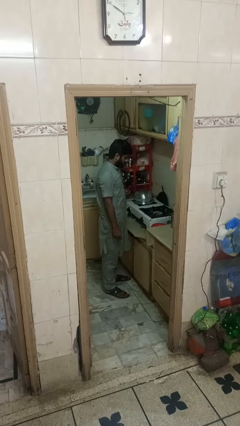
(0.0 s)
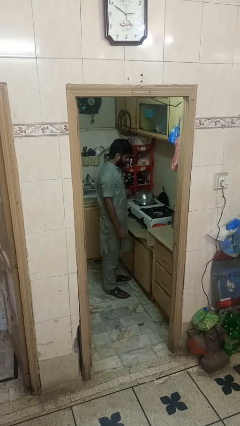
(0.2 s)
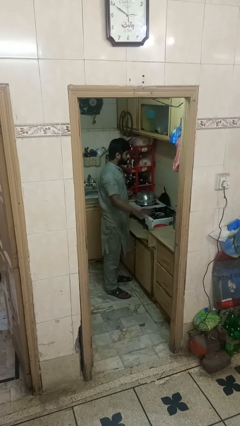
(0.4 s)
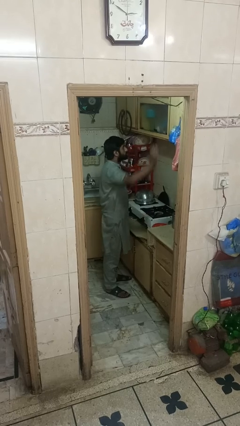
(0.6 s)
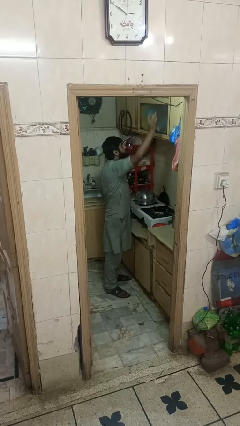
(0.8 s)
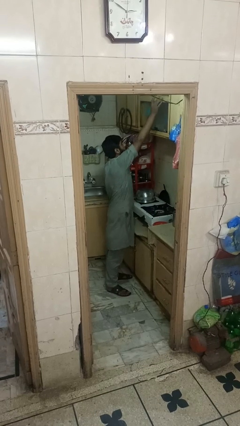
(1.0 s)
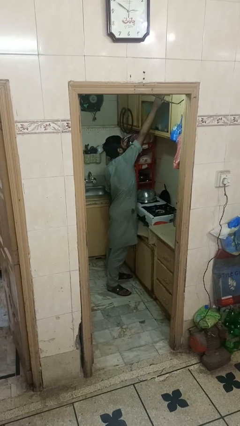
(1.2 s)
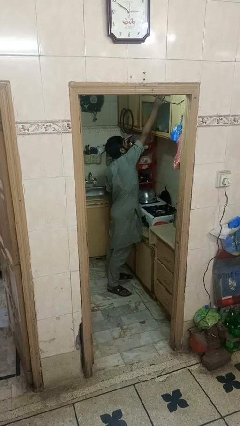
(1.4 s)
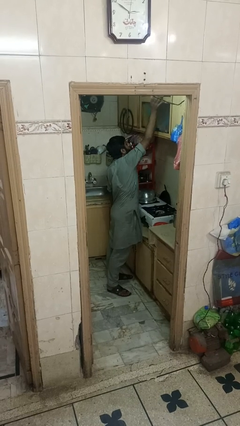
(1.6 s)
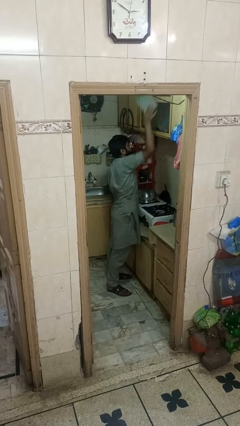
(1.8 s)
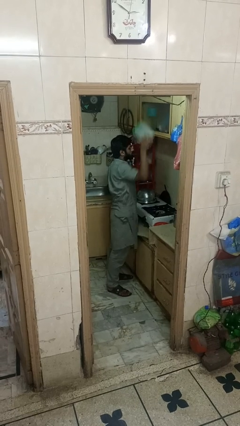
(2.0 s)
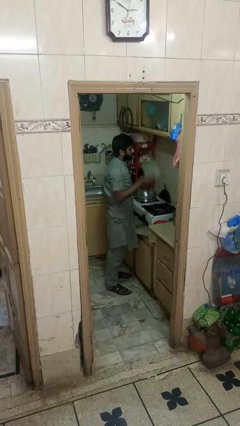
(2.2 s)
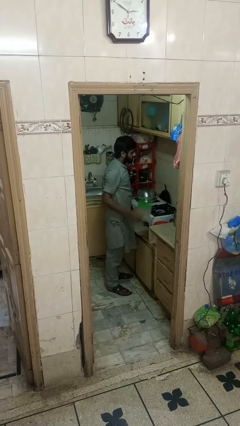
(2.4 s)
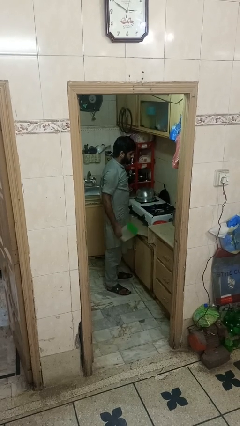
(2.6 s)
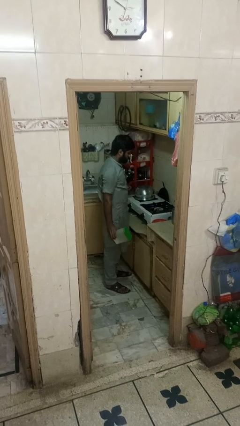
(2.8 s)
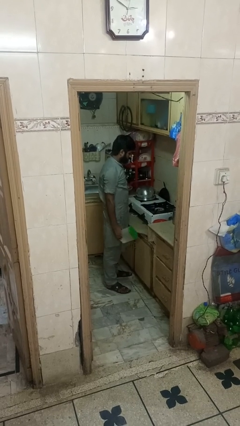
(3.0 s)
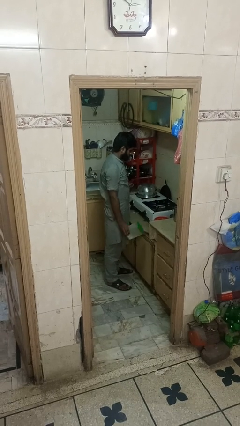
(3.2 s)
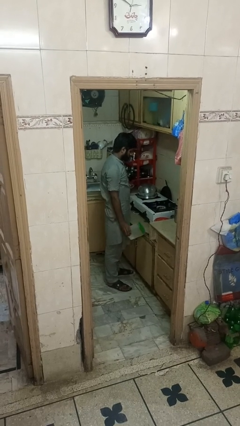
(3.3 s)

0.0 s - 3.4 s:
person picks up object from shelf

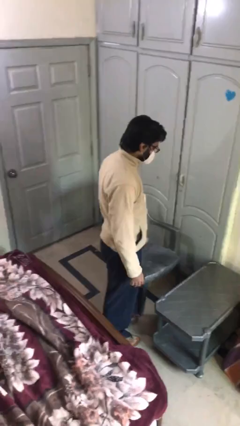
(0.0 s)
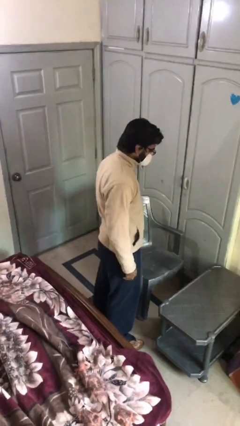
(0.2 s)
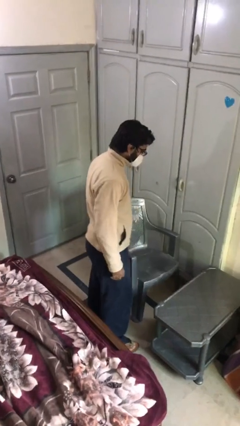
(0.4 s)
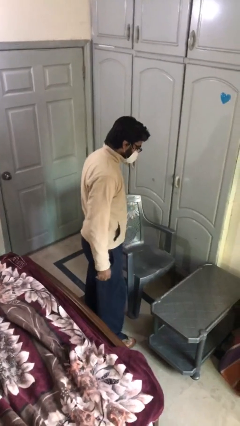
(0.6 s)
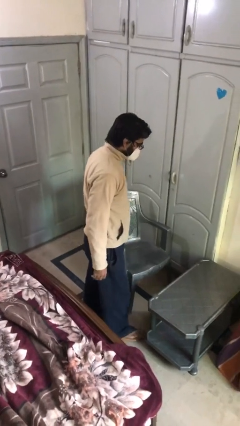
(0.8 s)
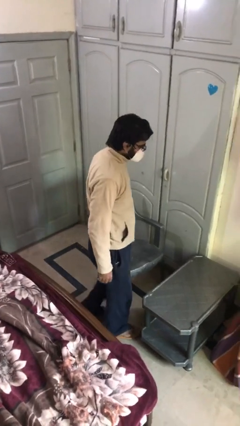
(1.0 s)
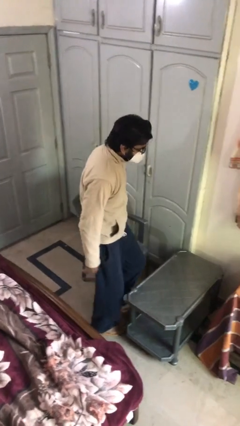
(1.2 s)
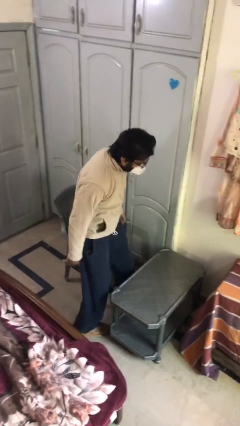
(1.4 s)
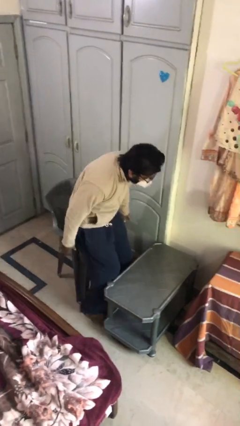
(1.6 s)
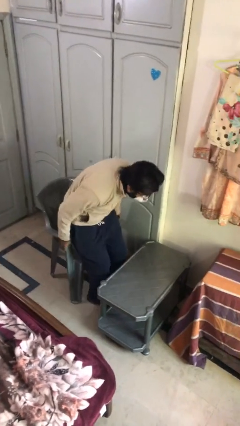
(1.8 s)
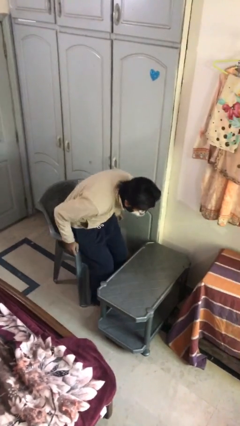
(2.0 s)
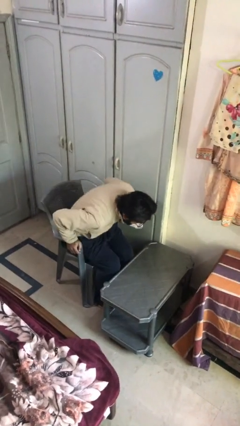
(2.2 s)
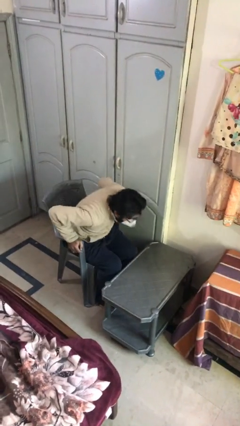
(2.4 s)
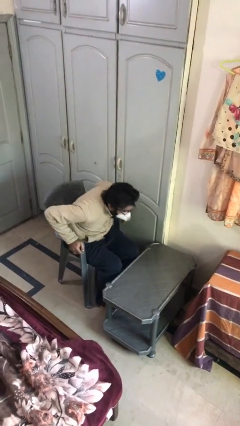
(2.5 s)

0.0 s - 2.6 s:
person sits down

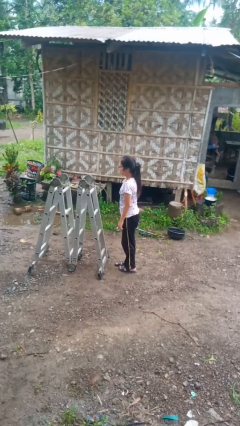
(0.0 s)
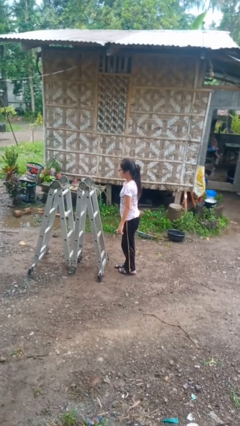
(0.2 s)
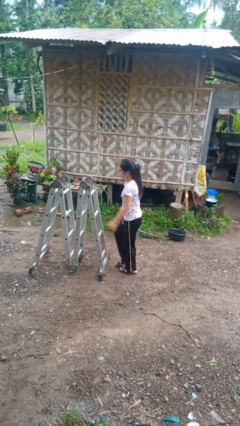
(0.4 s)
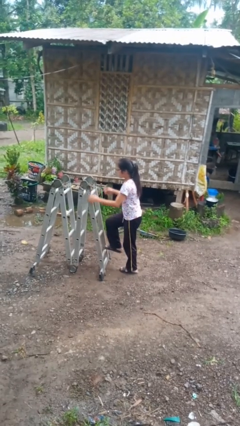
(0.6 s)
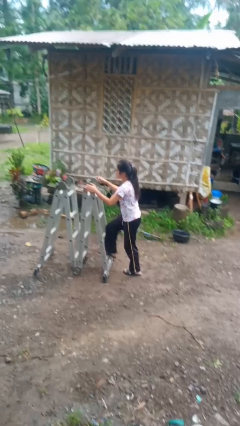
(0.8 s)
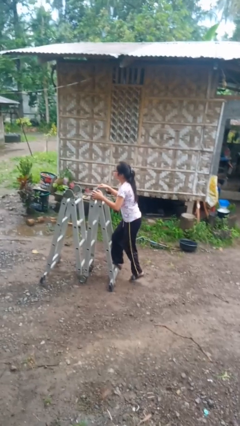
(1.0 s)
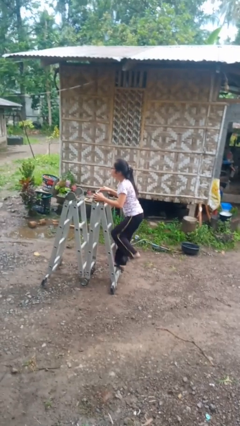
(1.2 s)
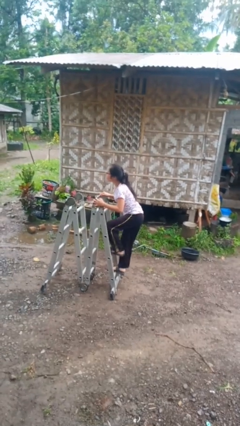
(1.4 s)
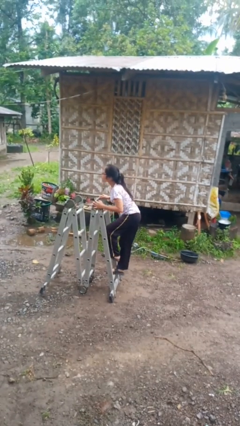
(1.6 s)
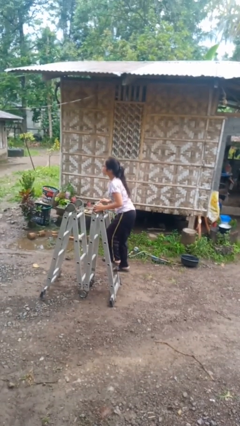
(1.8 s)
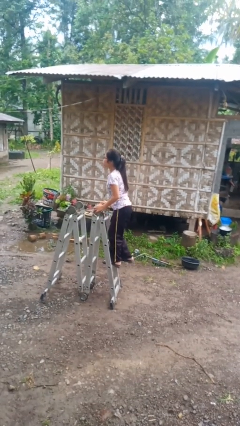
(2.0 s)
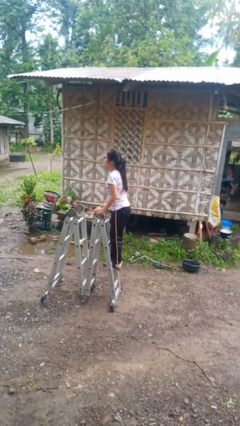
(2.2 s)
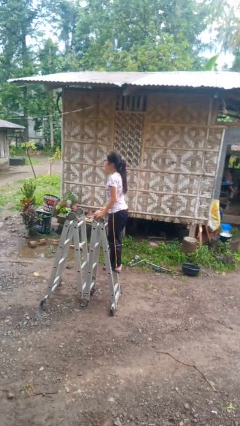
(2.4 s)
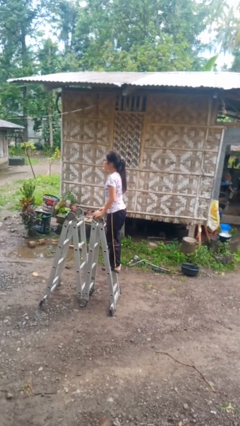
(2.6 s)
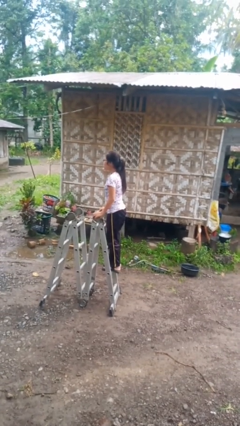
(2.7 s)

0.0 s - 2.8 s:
person climbs up ladder

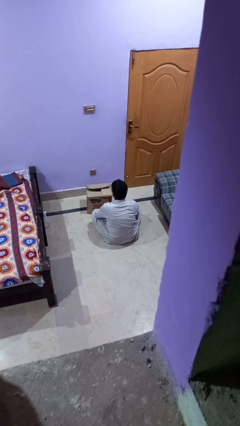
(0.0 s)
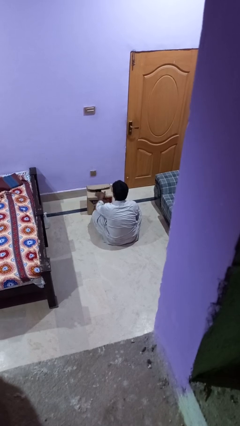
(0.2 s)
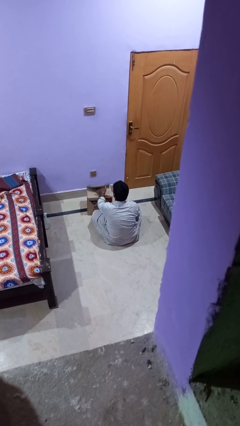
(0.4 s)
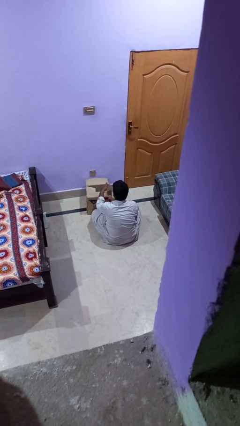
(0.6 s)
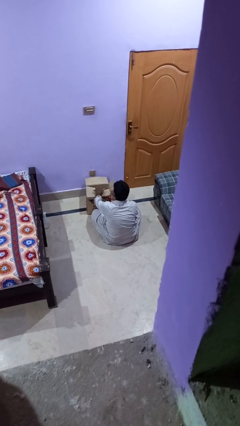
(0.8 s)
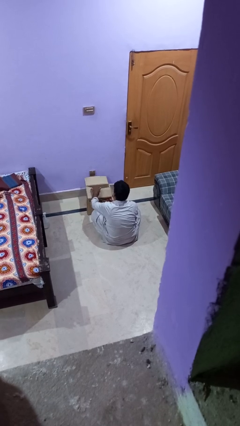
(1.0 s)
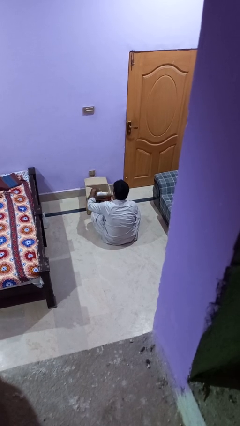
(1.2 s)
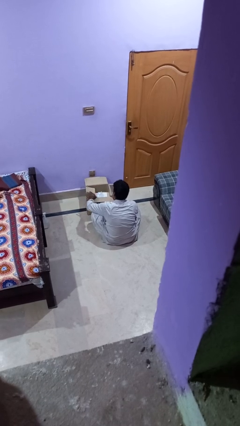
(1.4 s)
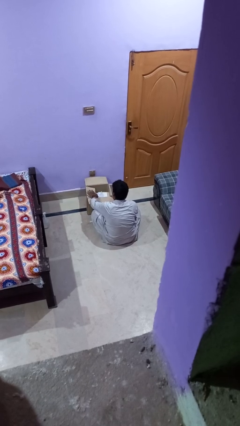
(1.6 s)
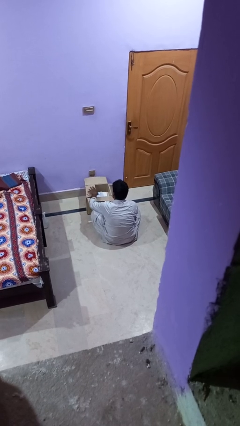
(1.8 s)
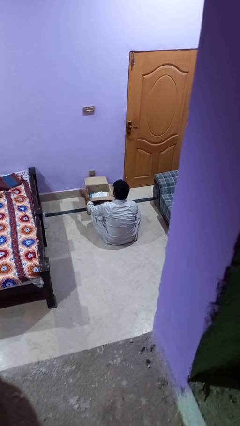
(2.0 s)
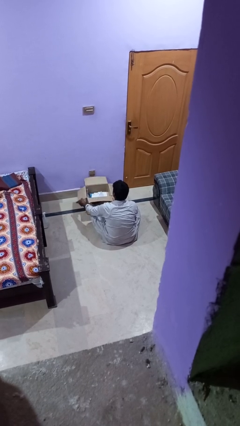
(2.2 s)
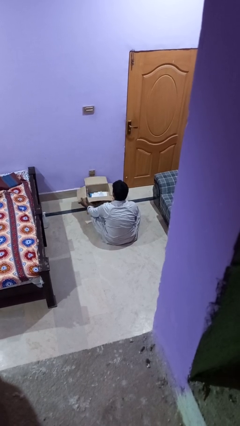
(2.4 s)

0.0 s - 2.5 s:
person opens box

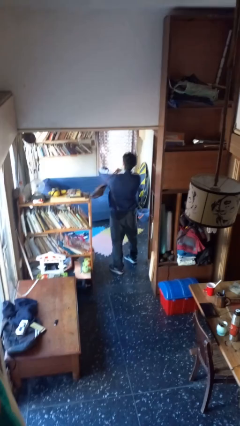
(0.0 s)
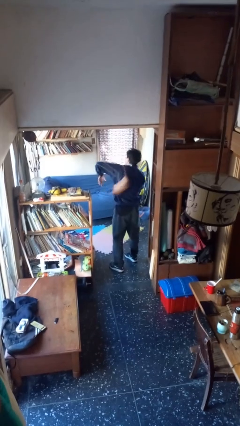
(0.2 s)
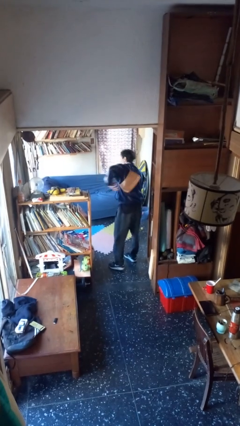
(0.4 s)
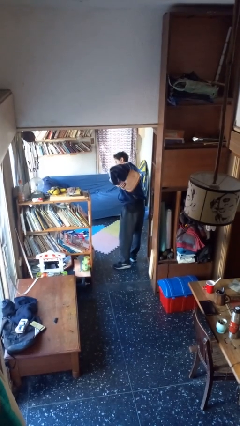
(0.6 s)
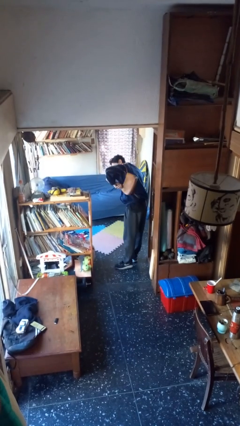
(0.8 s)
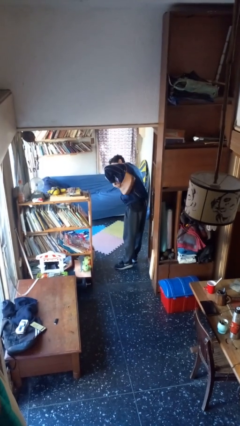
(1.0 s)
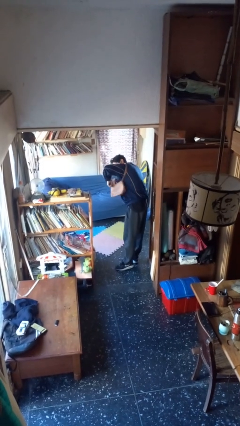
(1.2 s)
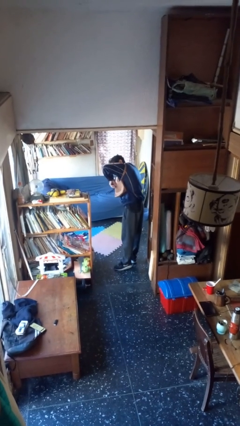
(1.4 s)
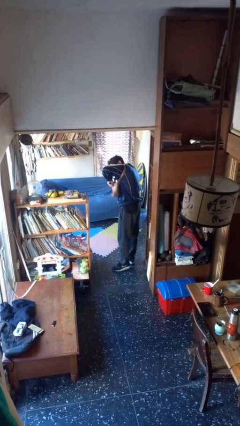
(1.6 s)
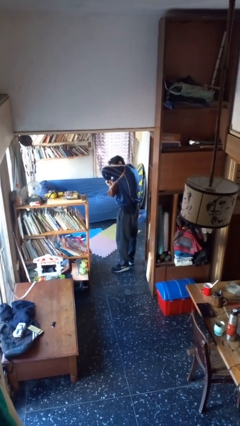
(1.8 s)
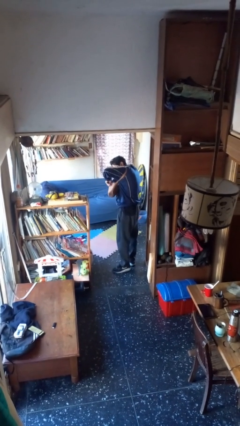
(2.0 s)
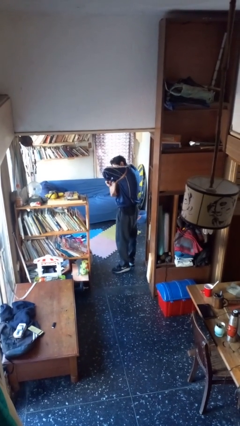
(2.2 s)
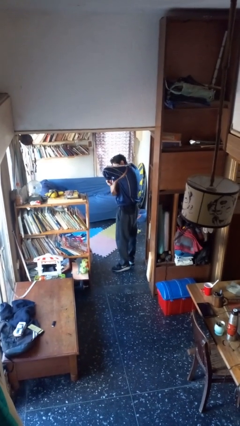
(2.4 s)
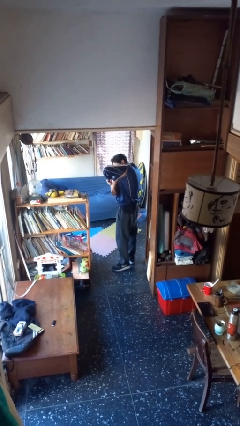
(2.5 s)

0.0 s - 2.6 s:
person searches in purse

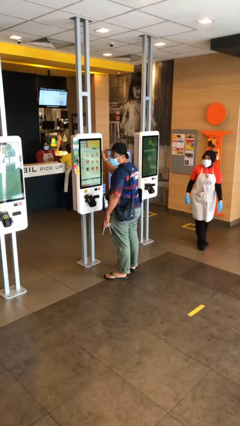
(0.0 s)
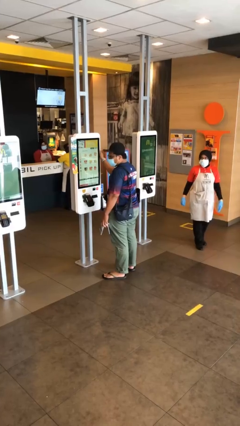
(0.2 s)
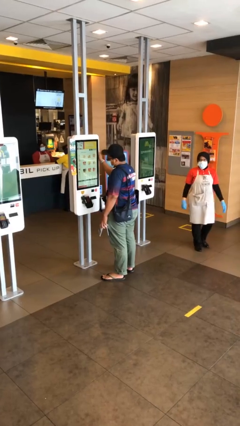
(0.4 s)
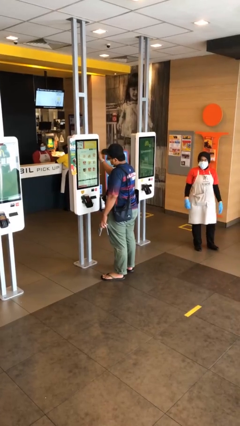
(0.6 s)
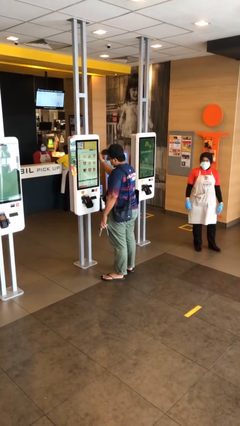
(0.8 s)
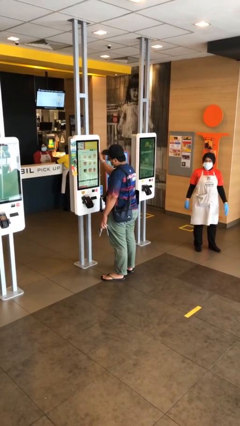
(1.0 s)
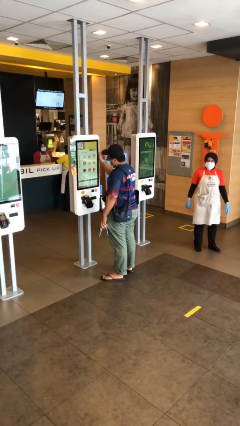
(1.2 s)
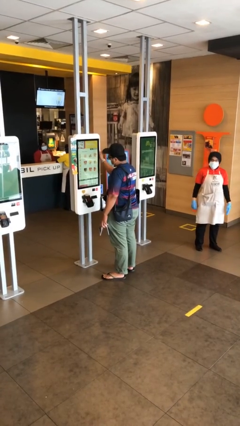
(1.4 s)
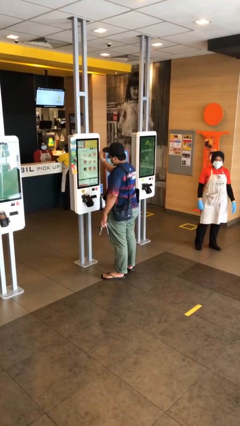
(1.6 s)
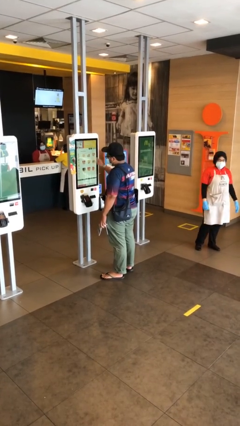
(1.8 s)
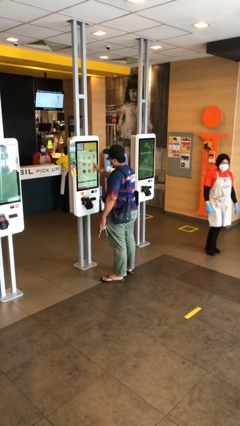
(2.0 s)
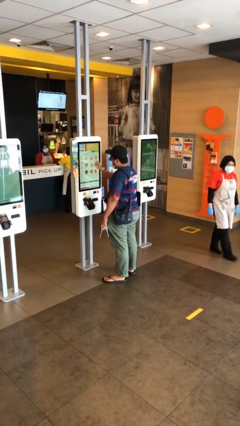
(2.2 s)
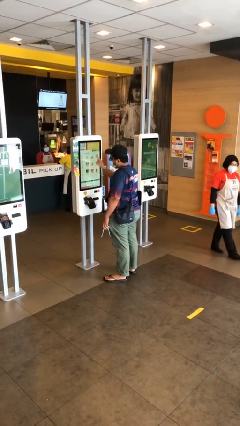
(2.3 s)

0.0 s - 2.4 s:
person purchases from machine

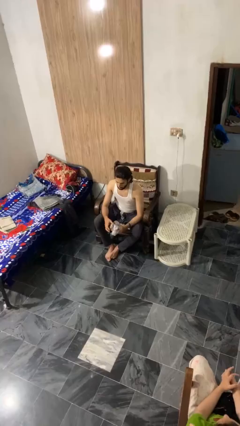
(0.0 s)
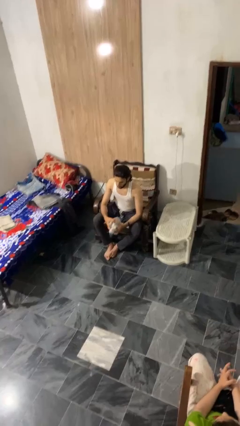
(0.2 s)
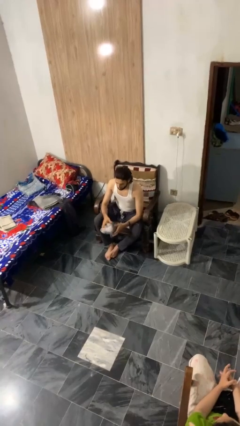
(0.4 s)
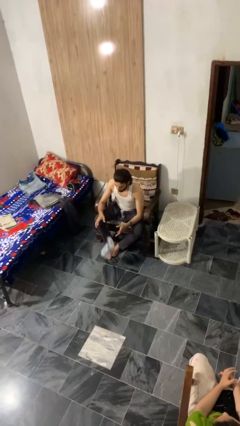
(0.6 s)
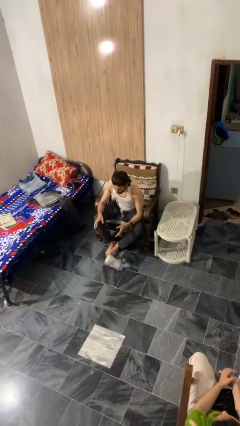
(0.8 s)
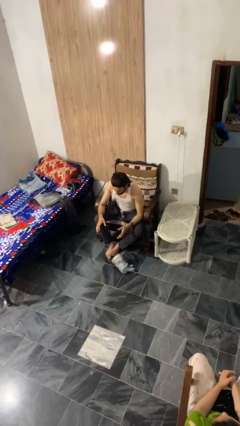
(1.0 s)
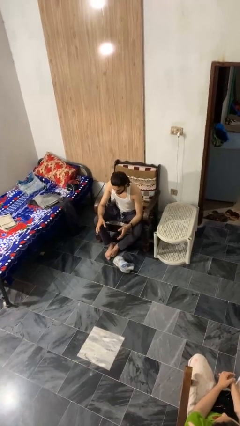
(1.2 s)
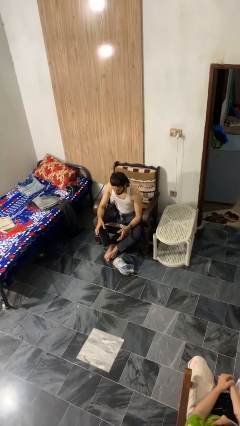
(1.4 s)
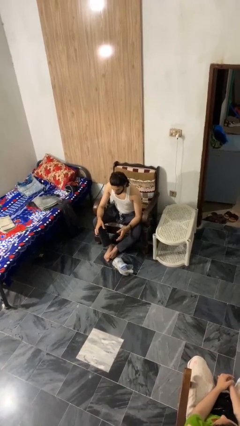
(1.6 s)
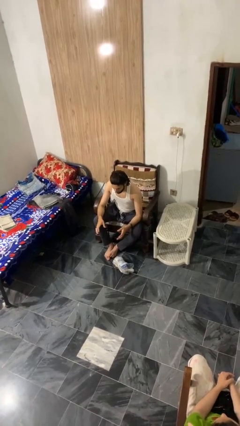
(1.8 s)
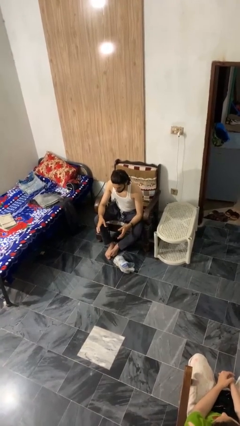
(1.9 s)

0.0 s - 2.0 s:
person drops object
